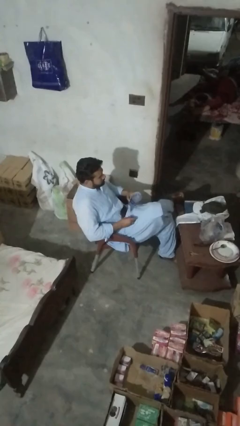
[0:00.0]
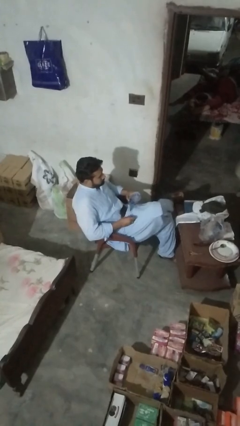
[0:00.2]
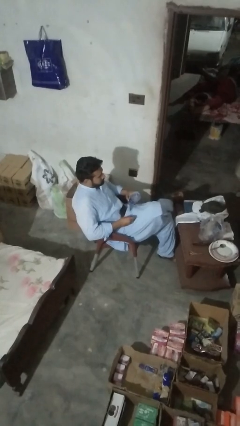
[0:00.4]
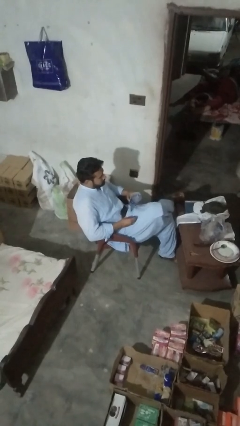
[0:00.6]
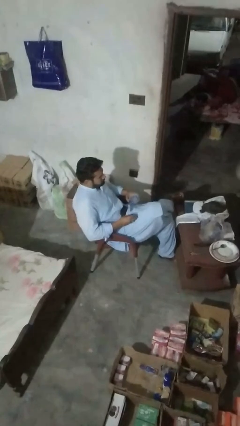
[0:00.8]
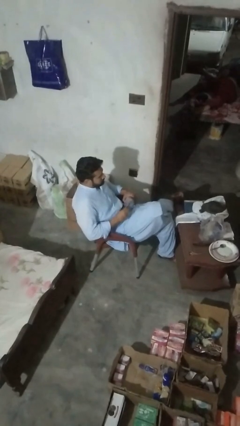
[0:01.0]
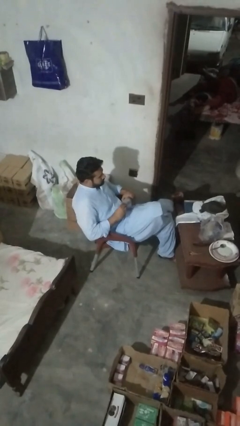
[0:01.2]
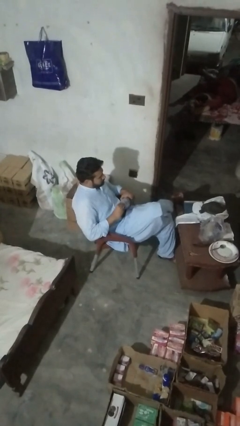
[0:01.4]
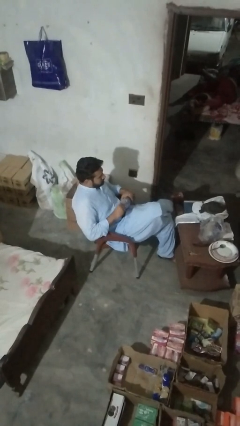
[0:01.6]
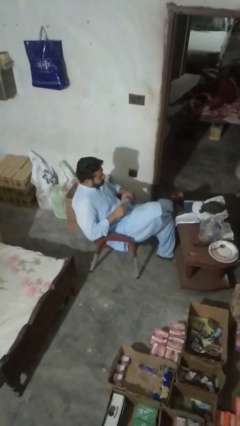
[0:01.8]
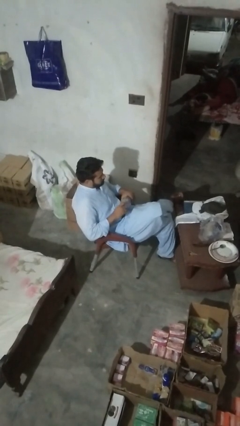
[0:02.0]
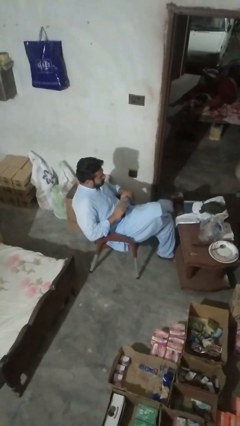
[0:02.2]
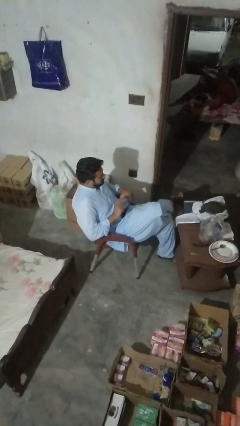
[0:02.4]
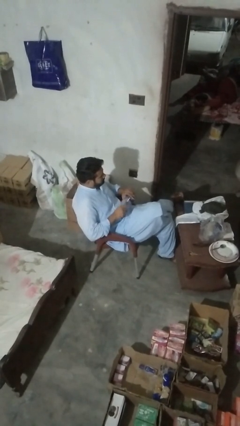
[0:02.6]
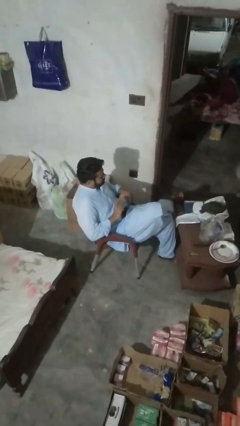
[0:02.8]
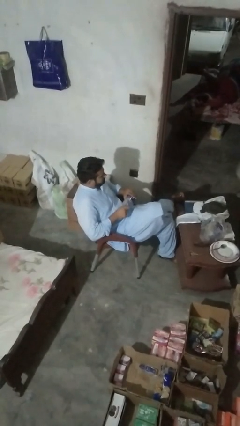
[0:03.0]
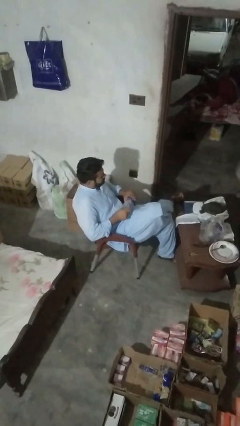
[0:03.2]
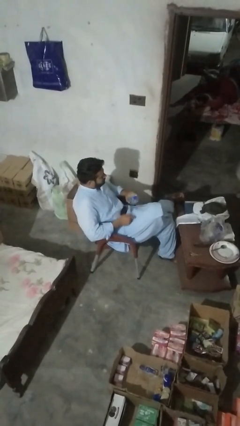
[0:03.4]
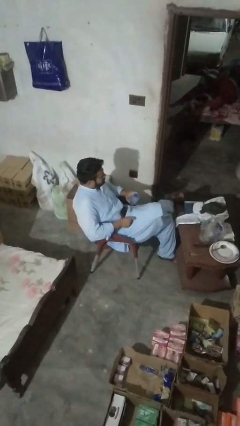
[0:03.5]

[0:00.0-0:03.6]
person screws lid to bottle

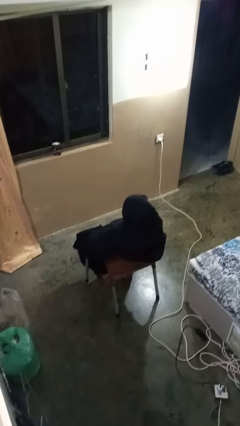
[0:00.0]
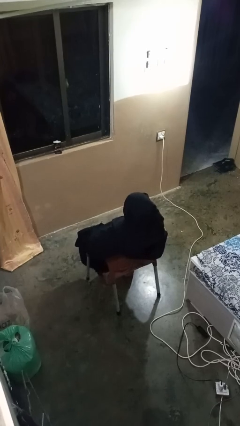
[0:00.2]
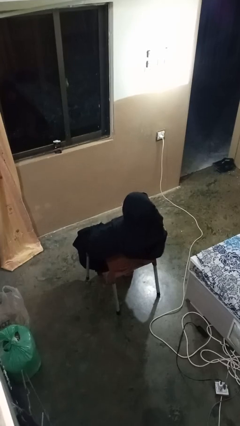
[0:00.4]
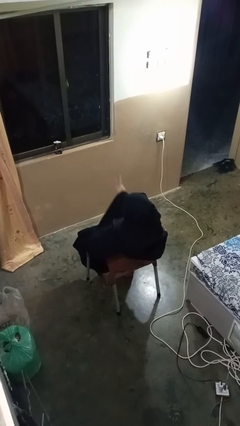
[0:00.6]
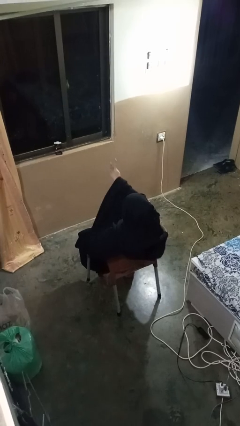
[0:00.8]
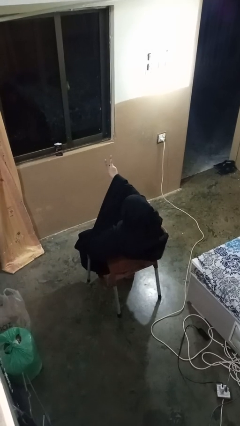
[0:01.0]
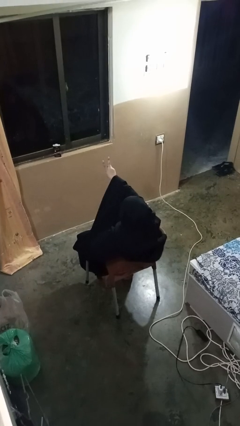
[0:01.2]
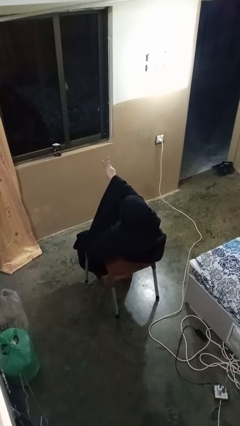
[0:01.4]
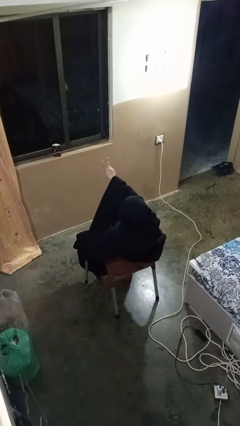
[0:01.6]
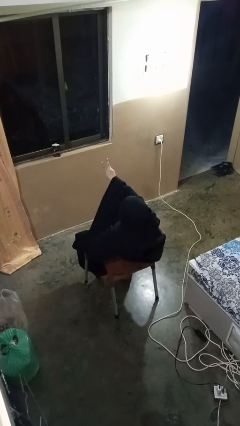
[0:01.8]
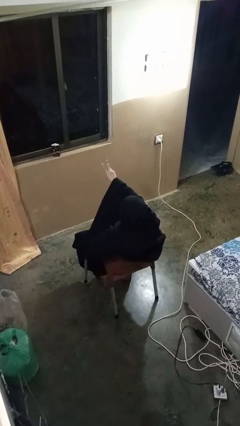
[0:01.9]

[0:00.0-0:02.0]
person gestures peace

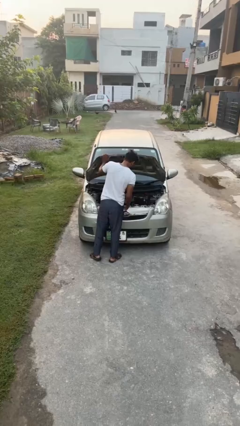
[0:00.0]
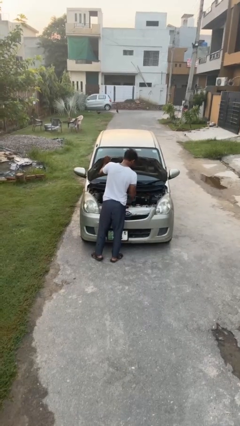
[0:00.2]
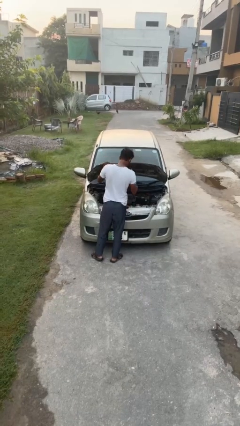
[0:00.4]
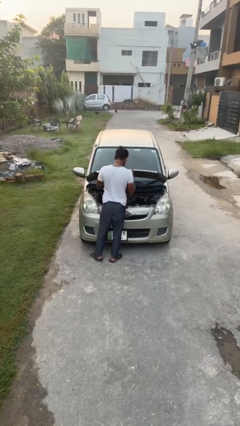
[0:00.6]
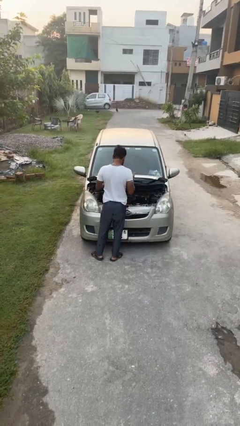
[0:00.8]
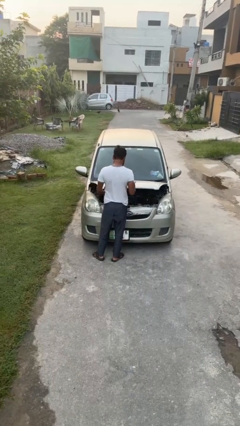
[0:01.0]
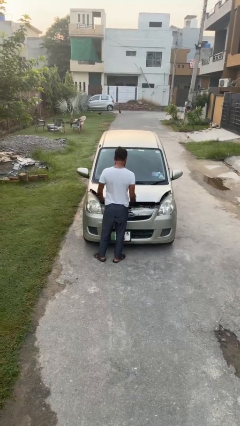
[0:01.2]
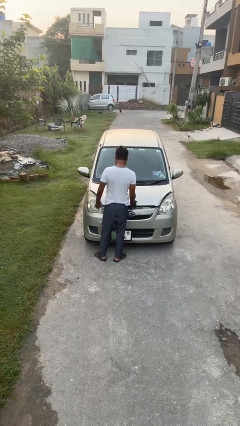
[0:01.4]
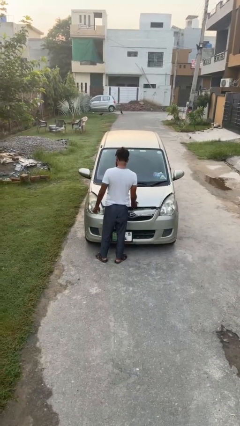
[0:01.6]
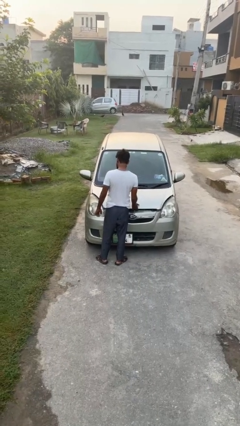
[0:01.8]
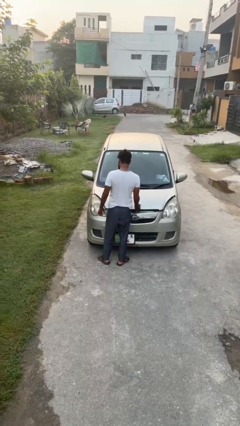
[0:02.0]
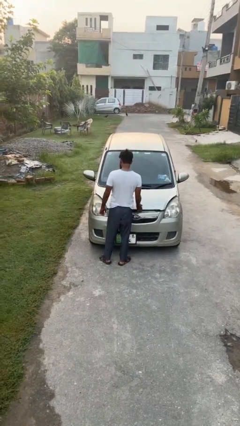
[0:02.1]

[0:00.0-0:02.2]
person closes car hood

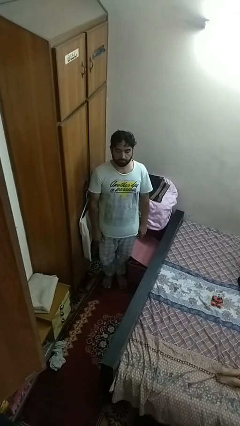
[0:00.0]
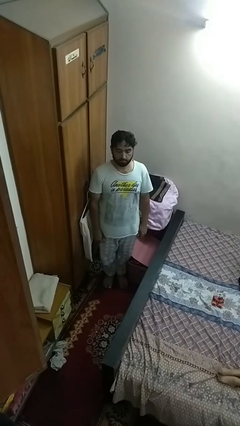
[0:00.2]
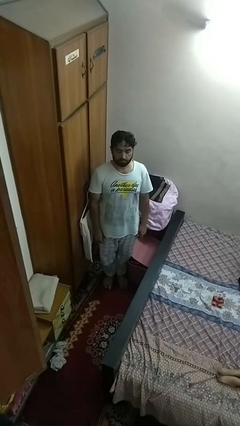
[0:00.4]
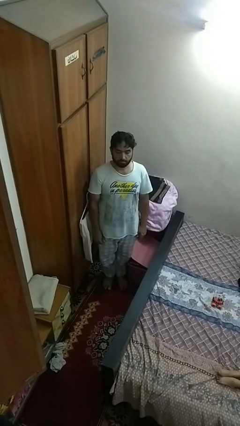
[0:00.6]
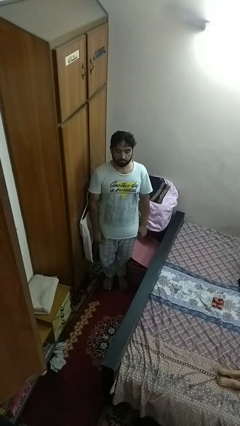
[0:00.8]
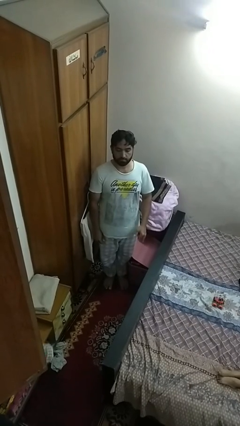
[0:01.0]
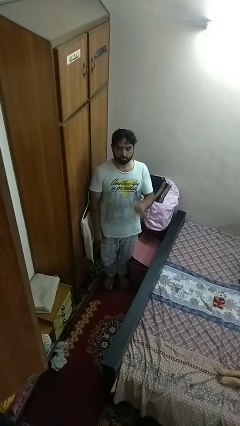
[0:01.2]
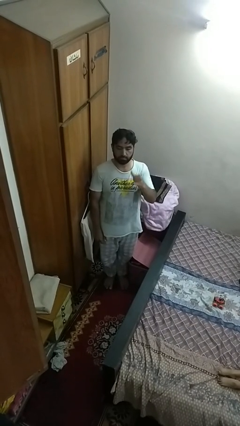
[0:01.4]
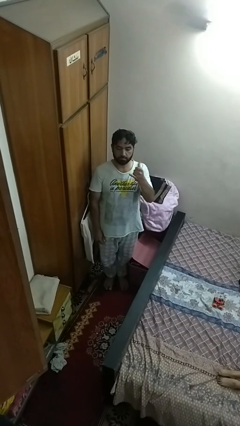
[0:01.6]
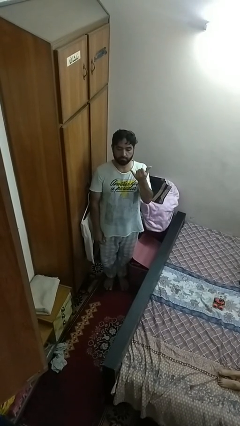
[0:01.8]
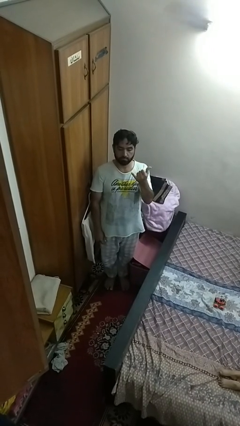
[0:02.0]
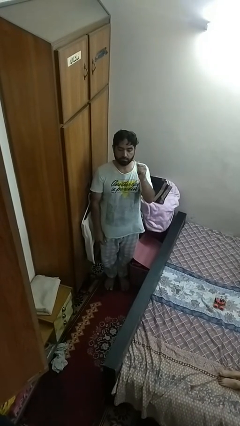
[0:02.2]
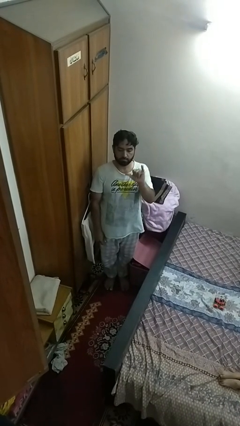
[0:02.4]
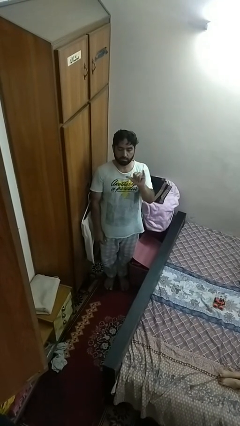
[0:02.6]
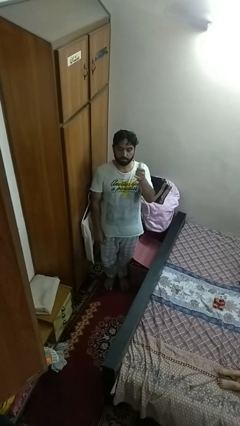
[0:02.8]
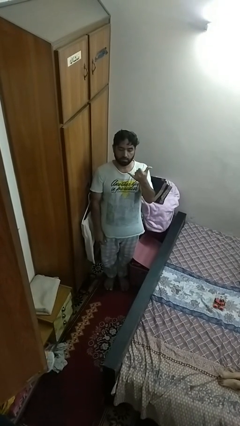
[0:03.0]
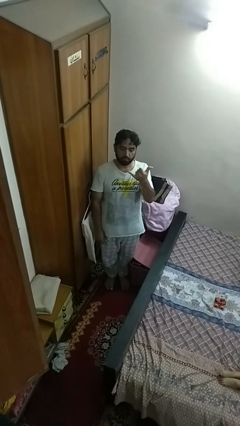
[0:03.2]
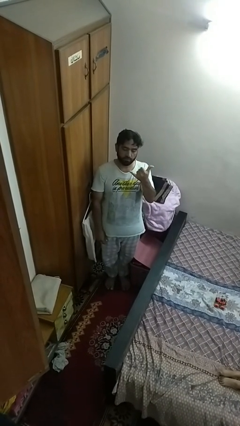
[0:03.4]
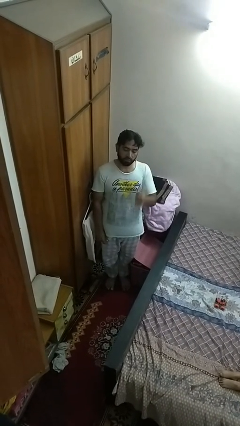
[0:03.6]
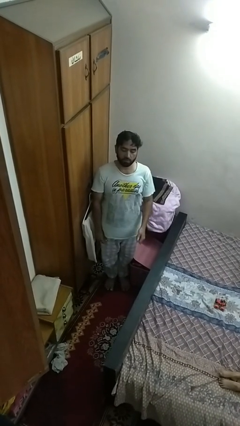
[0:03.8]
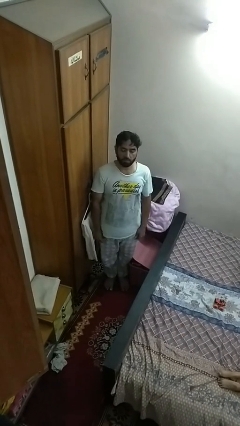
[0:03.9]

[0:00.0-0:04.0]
person gestures hang loose

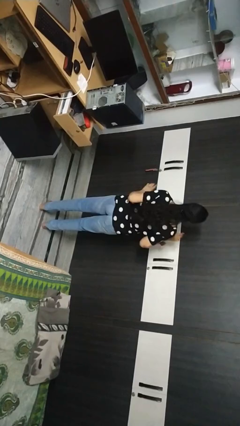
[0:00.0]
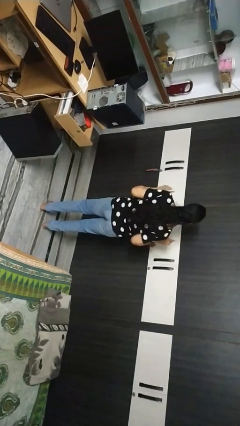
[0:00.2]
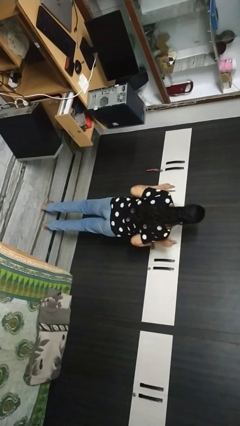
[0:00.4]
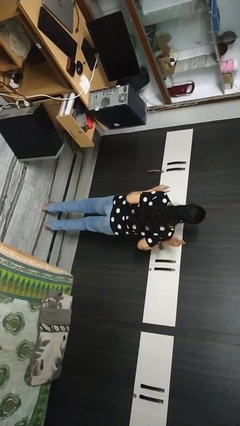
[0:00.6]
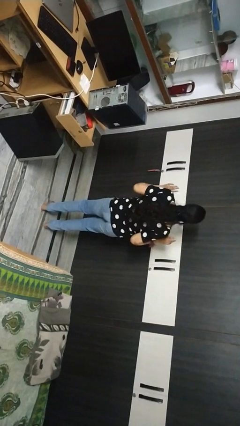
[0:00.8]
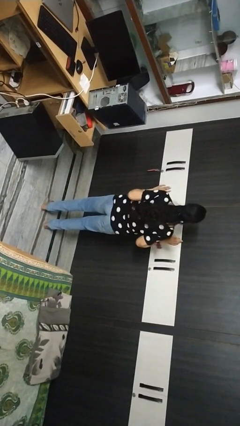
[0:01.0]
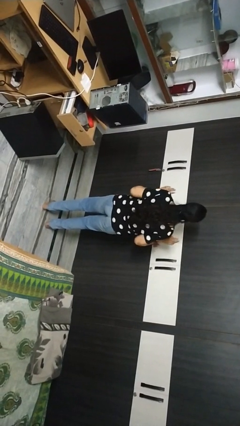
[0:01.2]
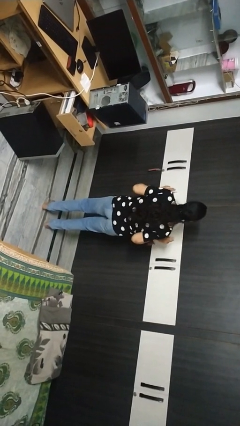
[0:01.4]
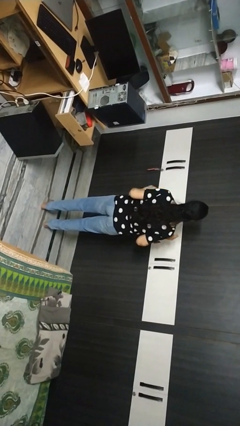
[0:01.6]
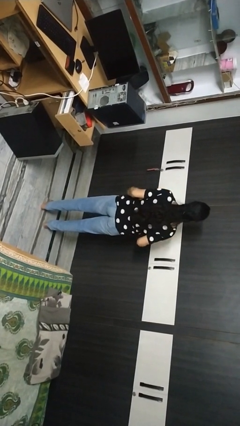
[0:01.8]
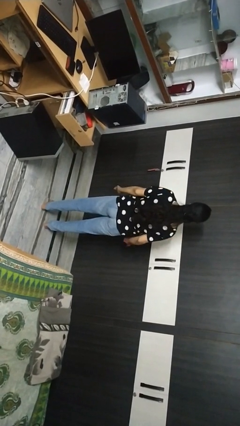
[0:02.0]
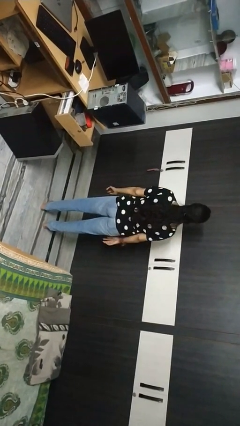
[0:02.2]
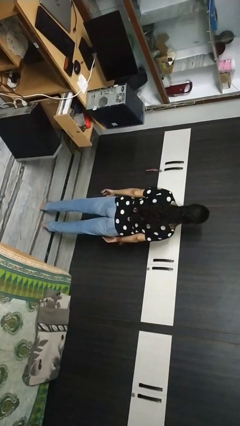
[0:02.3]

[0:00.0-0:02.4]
person dances in place

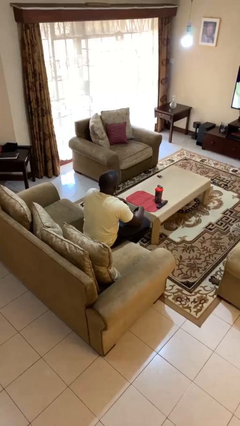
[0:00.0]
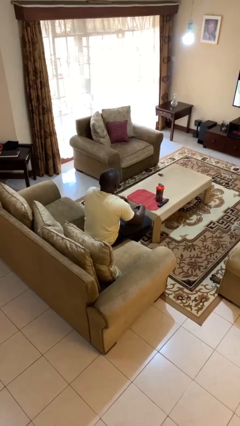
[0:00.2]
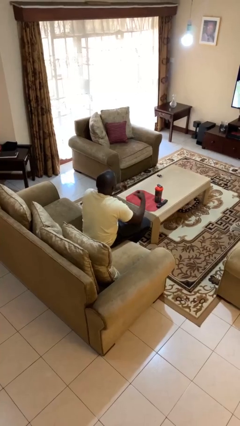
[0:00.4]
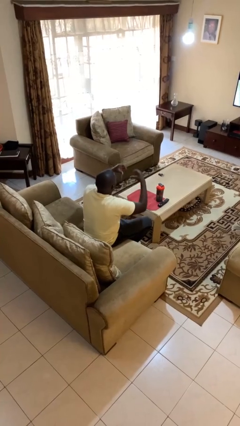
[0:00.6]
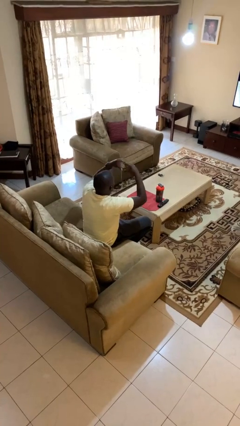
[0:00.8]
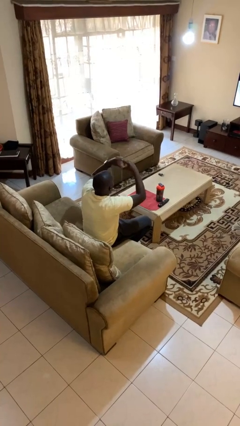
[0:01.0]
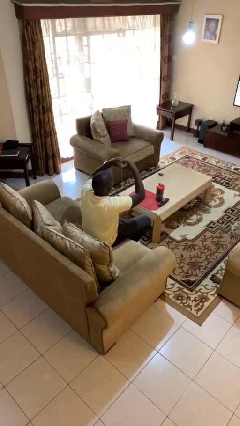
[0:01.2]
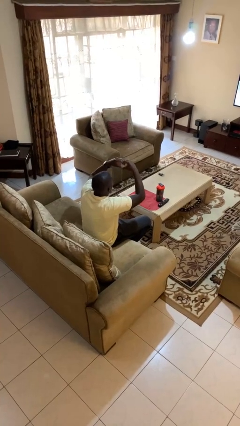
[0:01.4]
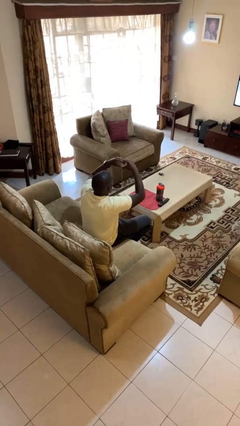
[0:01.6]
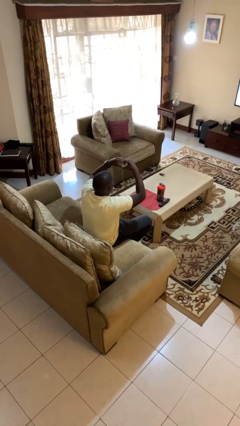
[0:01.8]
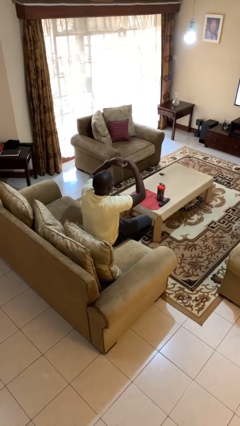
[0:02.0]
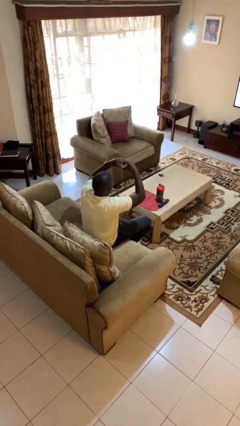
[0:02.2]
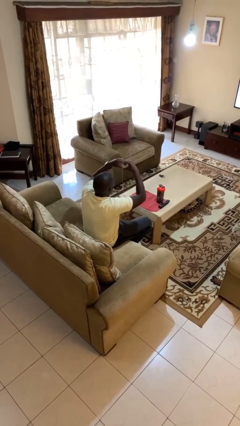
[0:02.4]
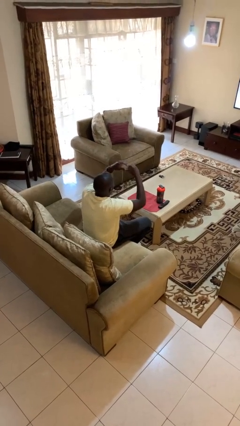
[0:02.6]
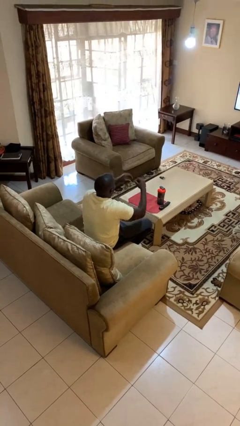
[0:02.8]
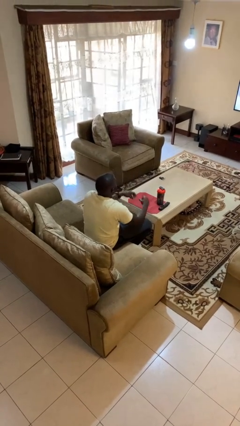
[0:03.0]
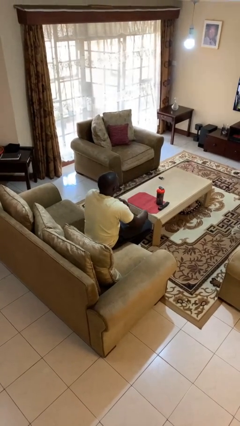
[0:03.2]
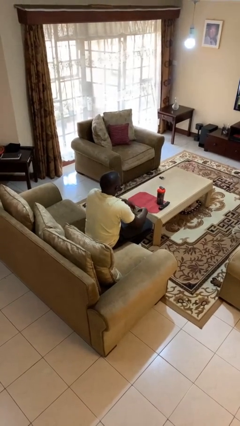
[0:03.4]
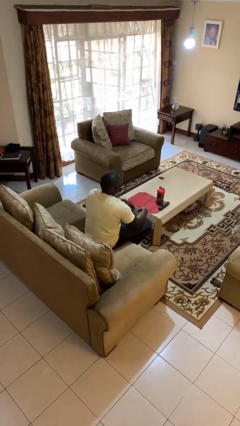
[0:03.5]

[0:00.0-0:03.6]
person gestures heart
